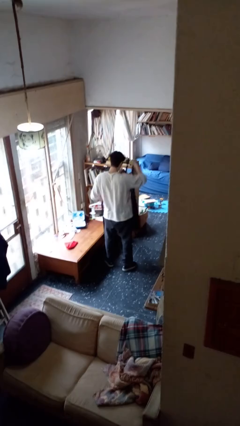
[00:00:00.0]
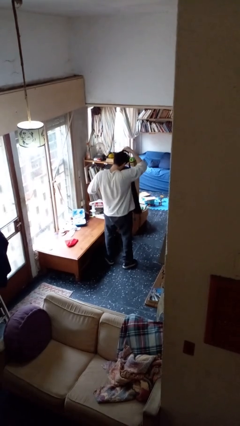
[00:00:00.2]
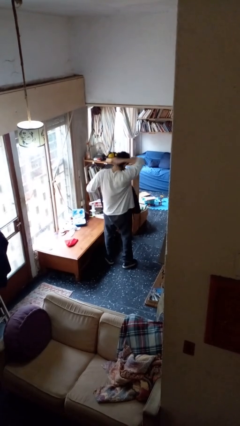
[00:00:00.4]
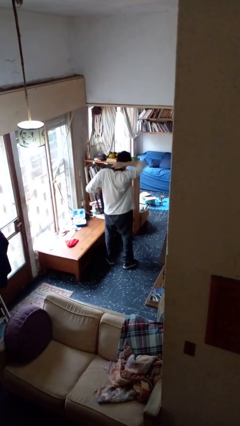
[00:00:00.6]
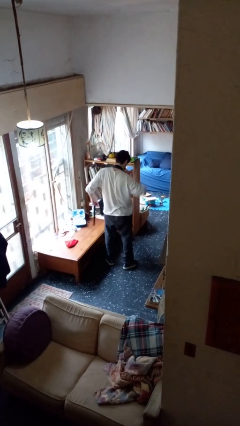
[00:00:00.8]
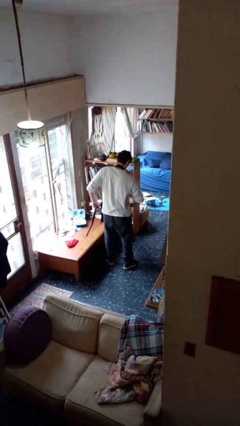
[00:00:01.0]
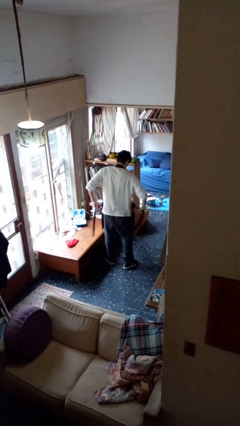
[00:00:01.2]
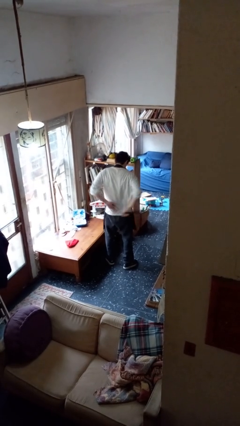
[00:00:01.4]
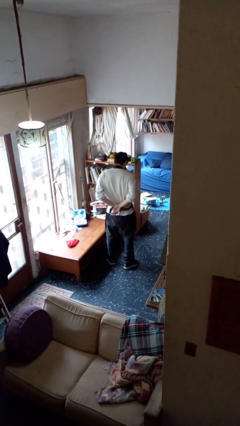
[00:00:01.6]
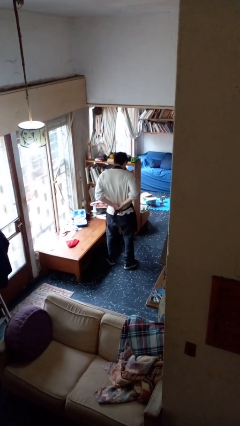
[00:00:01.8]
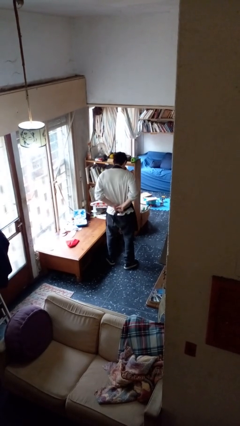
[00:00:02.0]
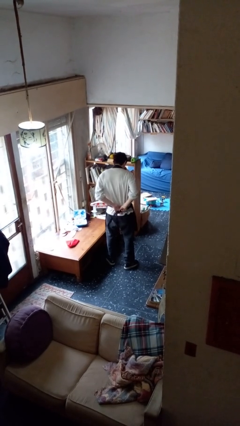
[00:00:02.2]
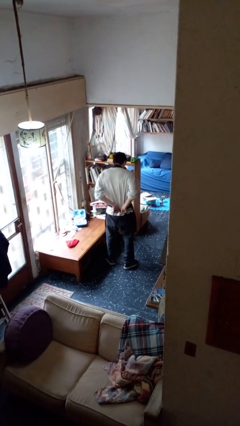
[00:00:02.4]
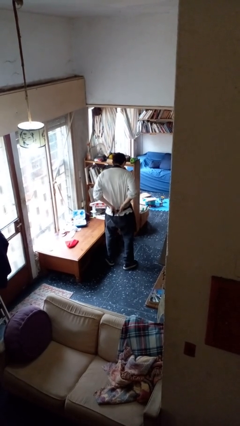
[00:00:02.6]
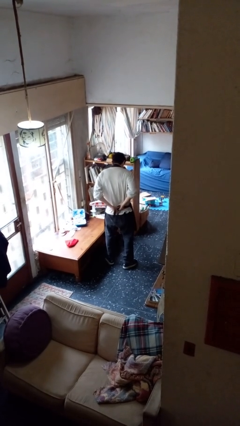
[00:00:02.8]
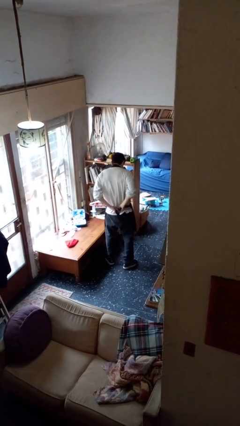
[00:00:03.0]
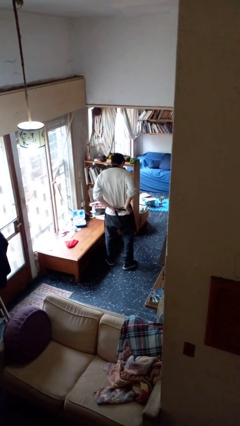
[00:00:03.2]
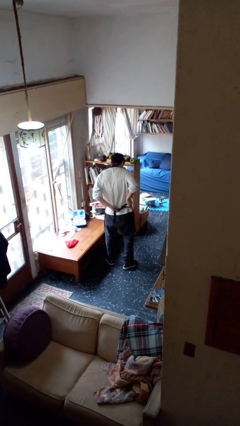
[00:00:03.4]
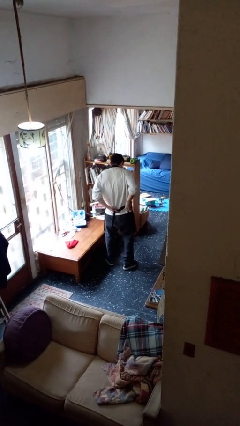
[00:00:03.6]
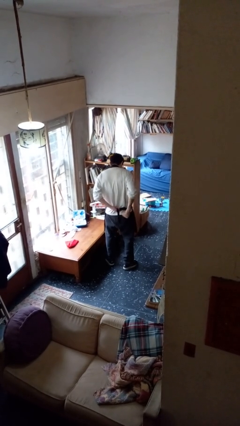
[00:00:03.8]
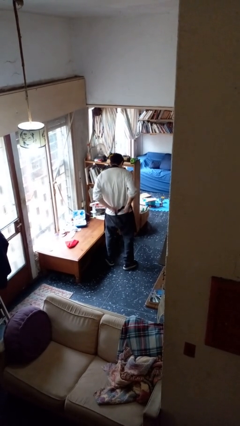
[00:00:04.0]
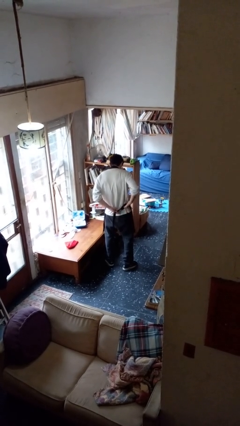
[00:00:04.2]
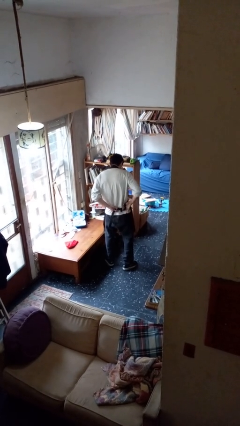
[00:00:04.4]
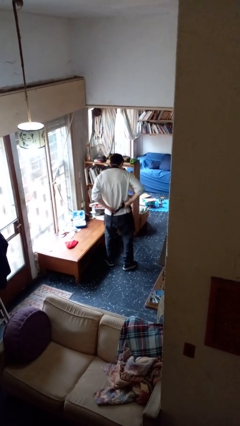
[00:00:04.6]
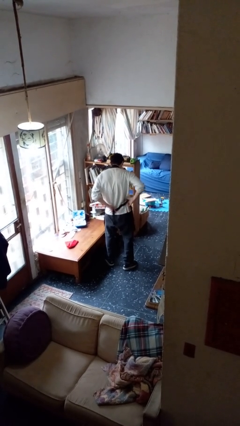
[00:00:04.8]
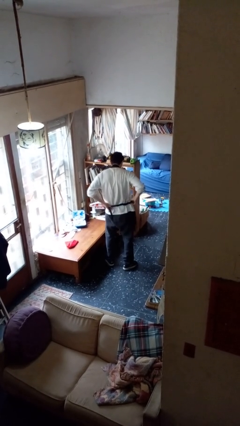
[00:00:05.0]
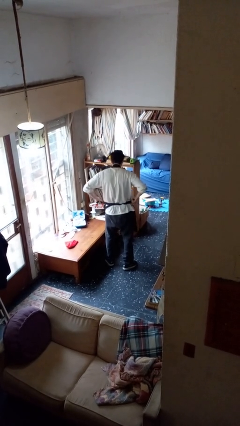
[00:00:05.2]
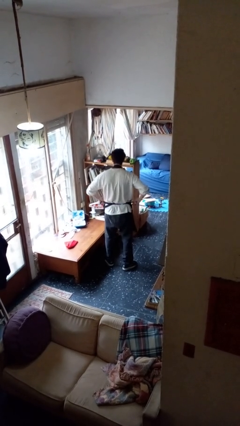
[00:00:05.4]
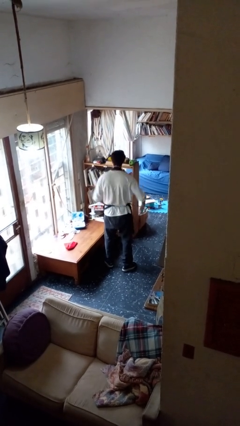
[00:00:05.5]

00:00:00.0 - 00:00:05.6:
person puts on apron

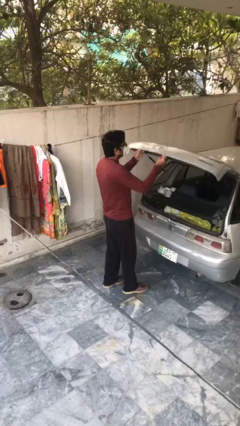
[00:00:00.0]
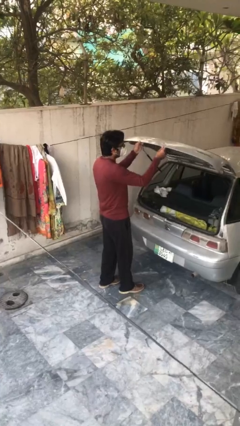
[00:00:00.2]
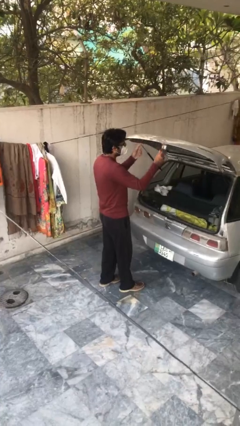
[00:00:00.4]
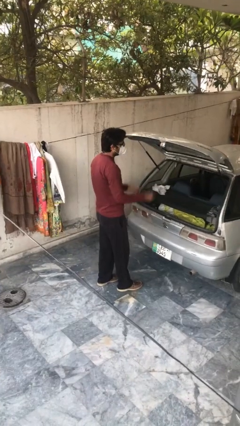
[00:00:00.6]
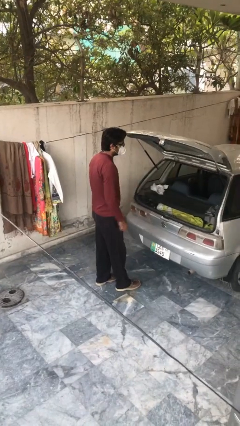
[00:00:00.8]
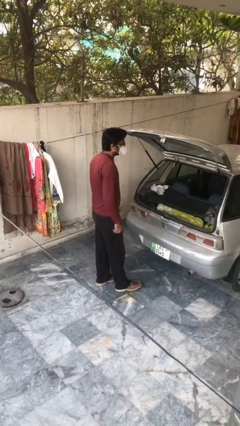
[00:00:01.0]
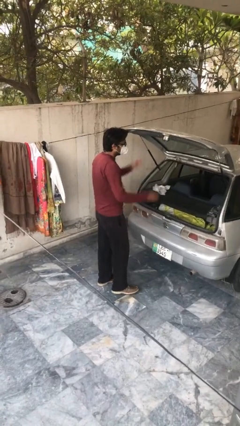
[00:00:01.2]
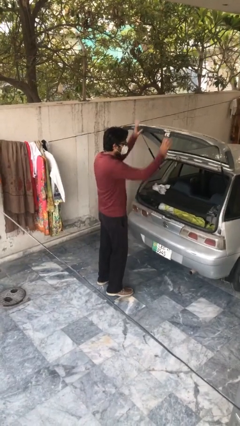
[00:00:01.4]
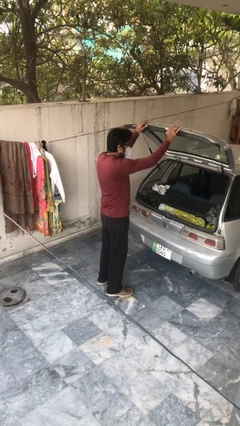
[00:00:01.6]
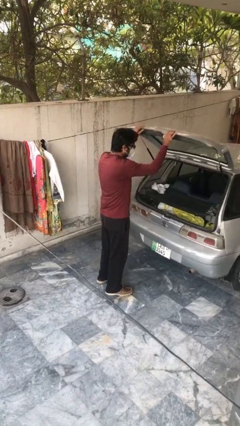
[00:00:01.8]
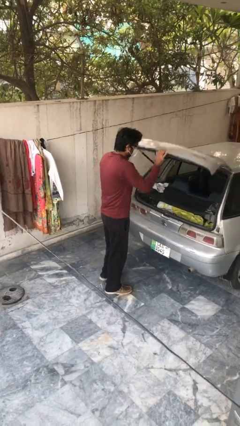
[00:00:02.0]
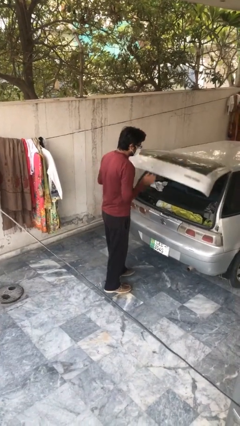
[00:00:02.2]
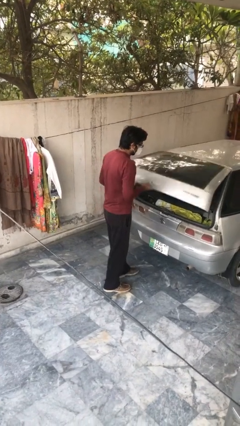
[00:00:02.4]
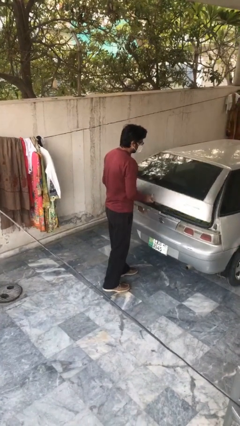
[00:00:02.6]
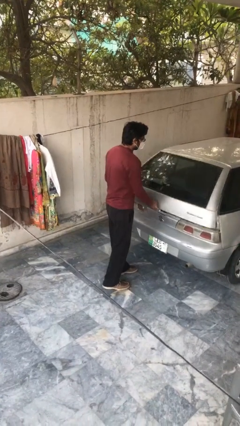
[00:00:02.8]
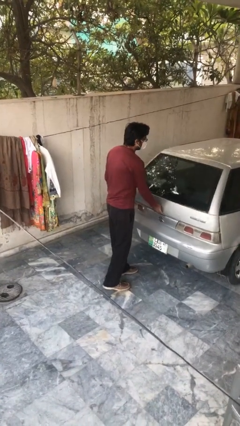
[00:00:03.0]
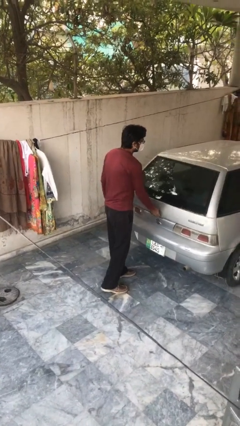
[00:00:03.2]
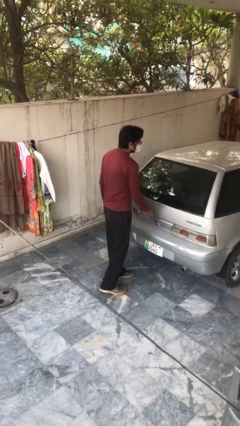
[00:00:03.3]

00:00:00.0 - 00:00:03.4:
person closes car trunk

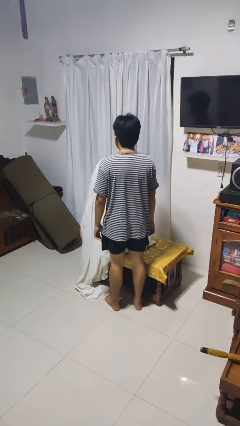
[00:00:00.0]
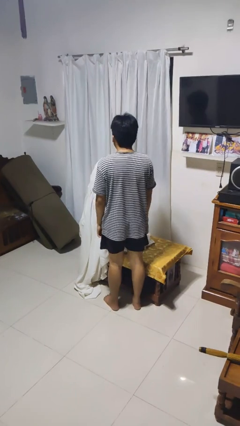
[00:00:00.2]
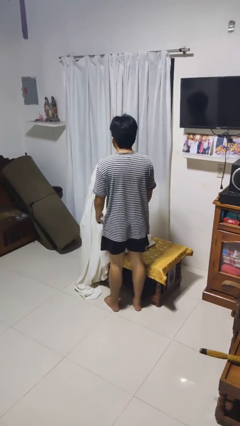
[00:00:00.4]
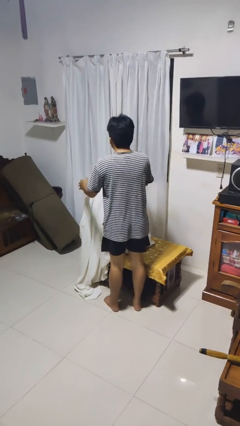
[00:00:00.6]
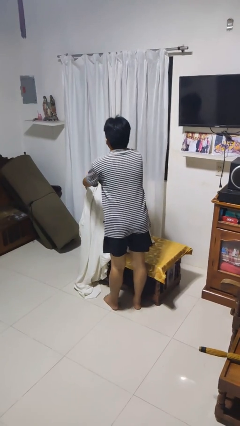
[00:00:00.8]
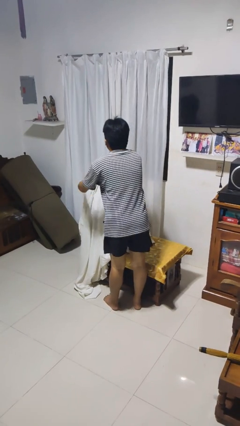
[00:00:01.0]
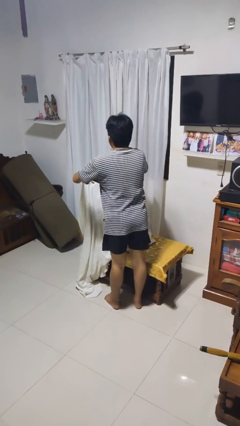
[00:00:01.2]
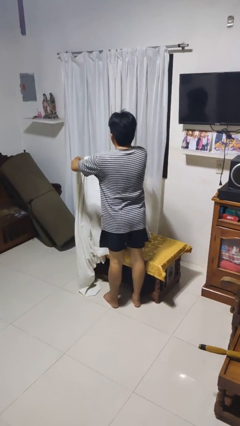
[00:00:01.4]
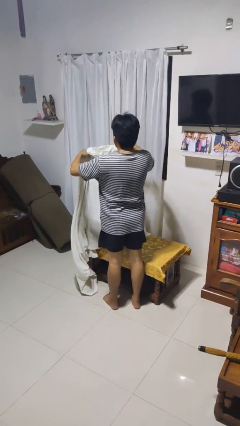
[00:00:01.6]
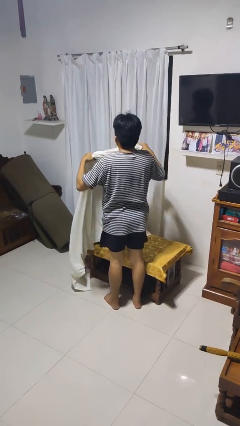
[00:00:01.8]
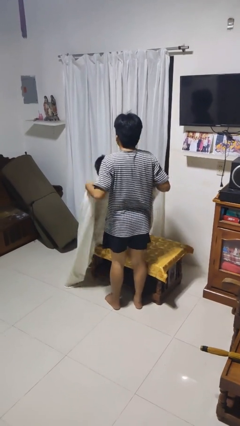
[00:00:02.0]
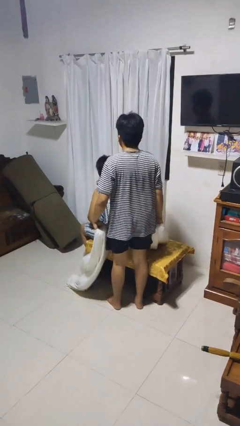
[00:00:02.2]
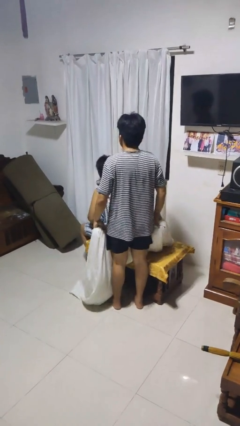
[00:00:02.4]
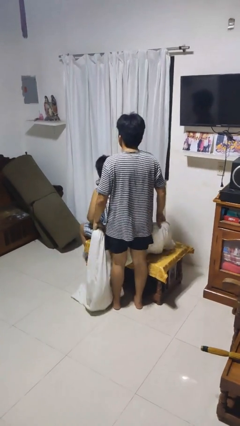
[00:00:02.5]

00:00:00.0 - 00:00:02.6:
person uncovers friend with blanket

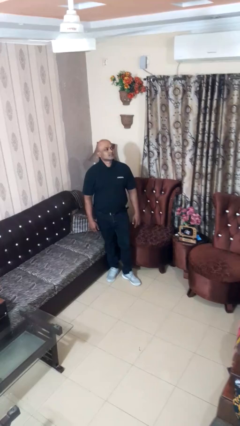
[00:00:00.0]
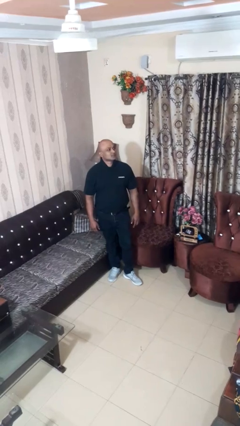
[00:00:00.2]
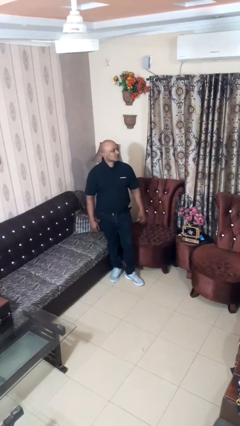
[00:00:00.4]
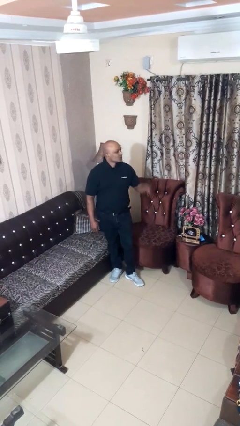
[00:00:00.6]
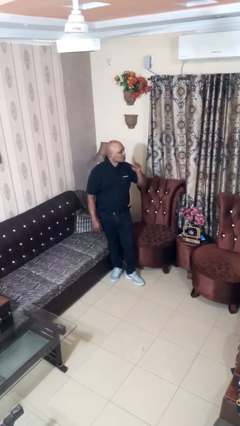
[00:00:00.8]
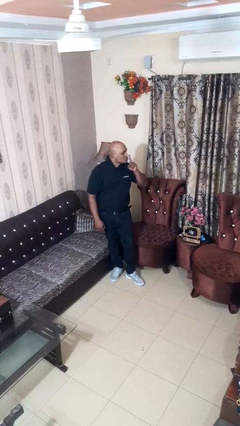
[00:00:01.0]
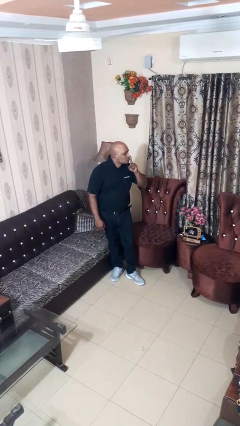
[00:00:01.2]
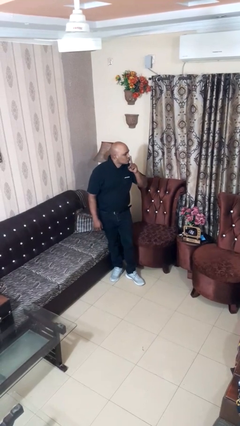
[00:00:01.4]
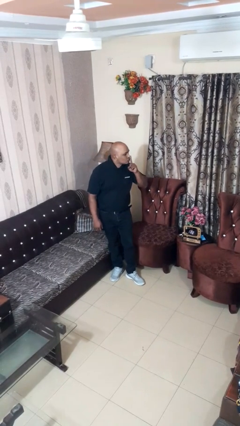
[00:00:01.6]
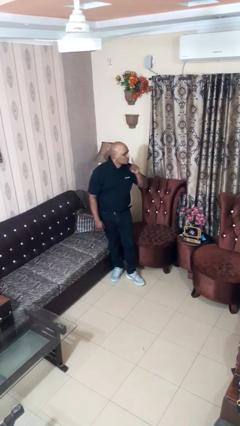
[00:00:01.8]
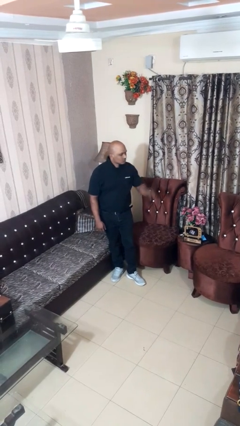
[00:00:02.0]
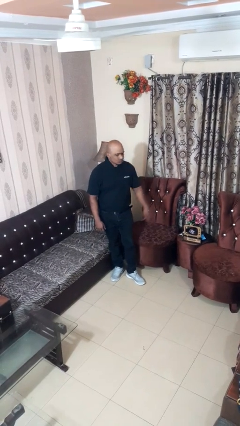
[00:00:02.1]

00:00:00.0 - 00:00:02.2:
person gestures be quiet

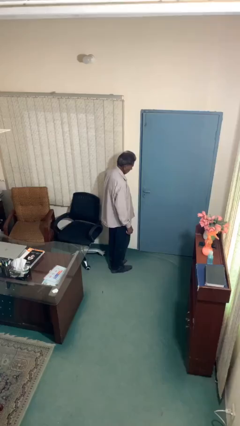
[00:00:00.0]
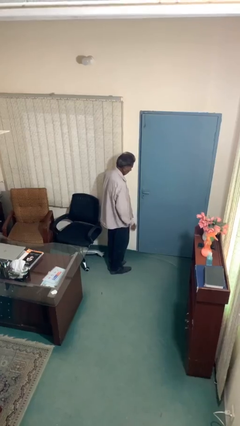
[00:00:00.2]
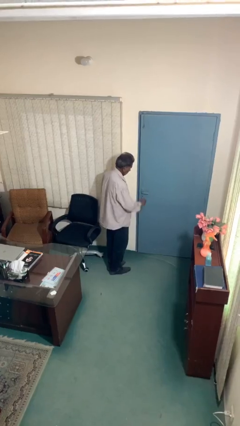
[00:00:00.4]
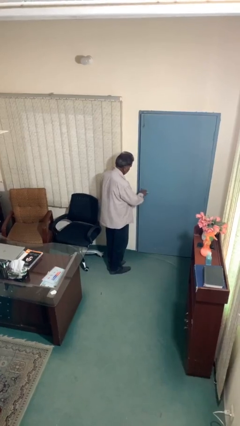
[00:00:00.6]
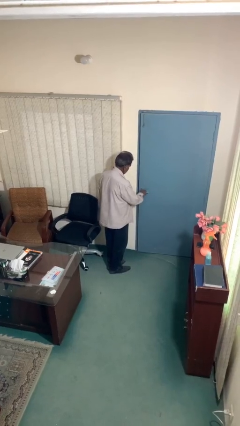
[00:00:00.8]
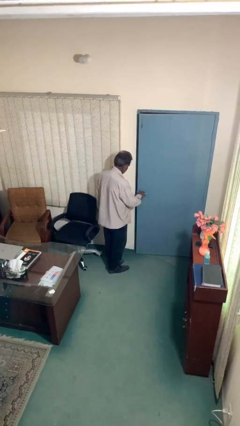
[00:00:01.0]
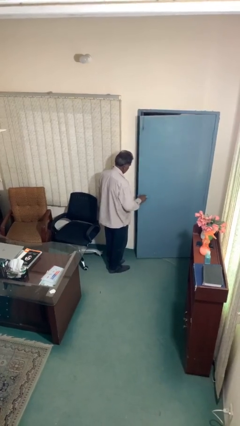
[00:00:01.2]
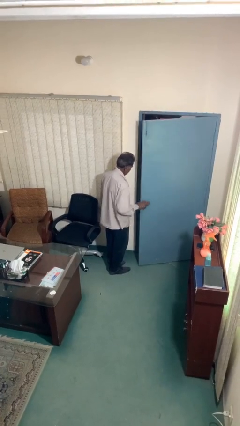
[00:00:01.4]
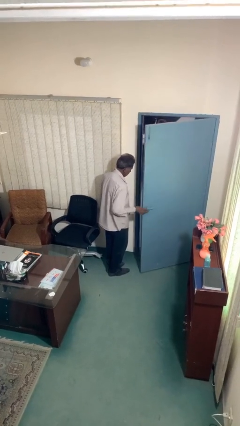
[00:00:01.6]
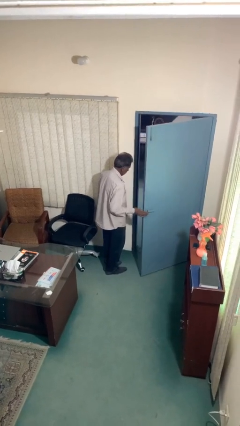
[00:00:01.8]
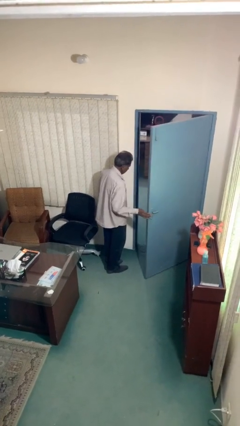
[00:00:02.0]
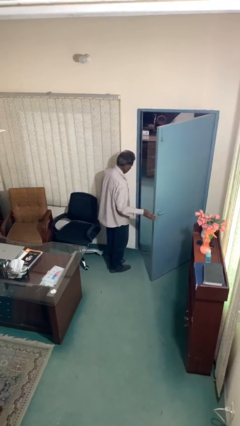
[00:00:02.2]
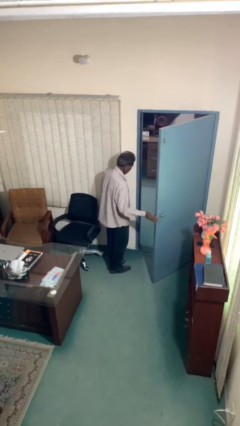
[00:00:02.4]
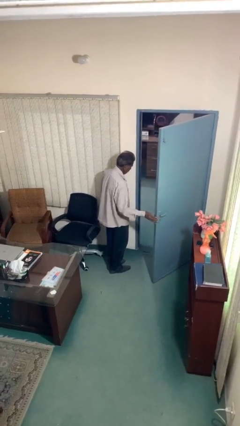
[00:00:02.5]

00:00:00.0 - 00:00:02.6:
person opens facility door

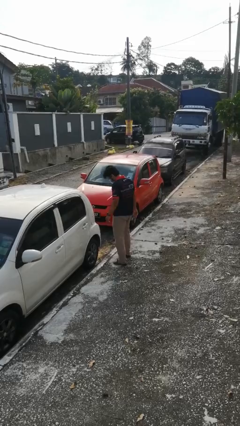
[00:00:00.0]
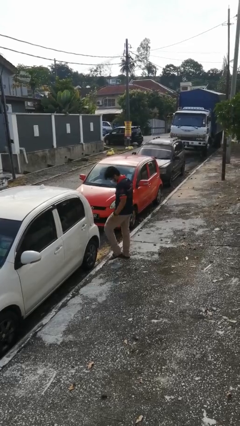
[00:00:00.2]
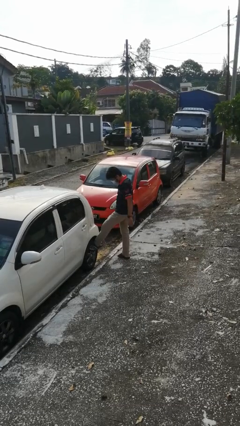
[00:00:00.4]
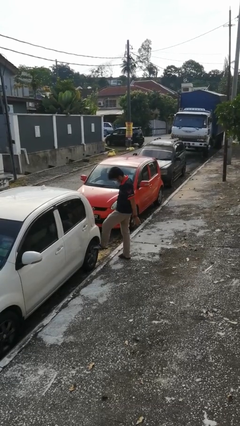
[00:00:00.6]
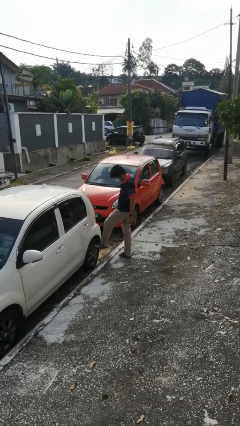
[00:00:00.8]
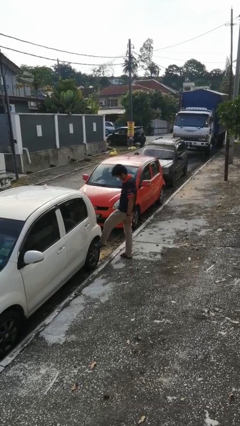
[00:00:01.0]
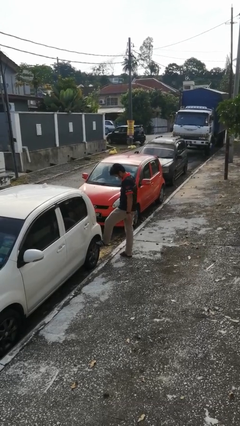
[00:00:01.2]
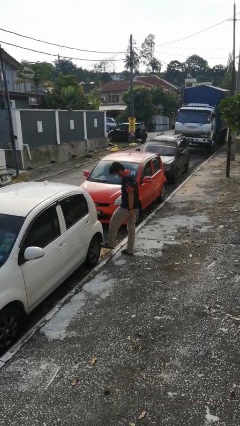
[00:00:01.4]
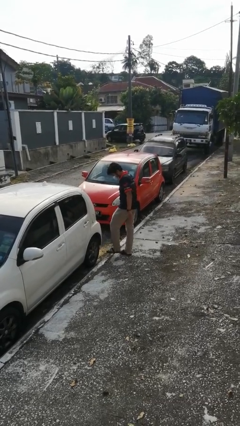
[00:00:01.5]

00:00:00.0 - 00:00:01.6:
person kicks car tires
